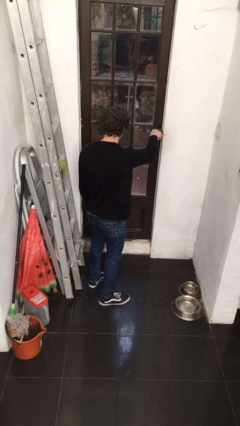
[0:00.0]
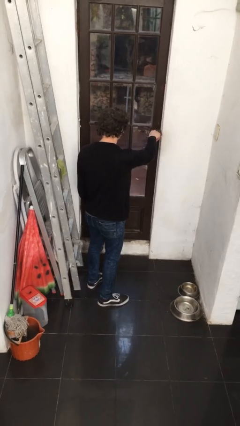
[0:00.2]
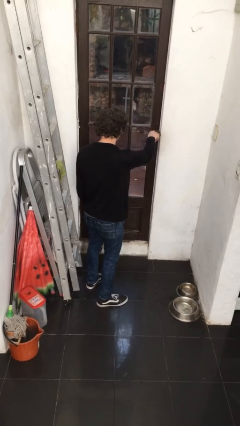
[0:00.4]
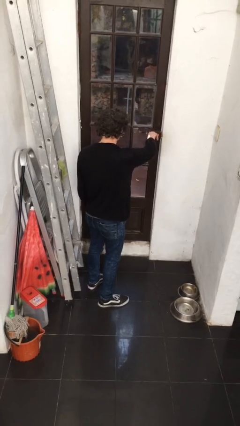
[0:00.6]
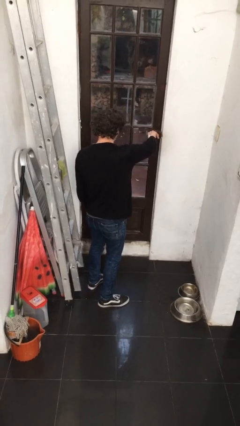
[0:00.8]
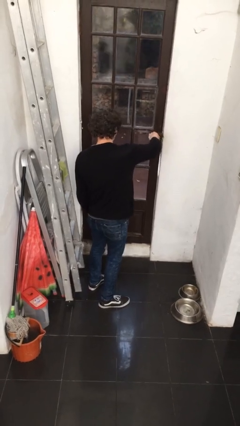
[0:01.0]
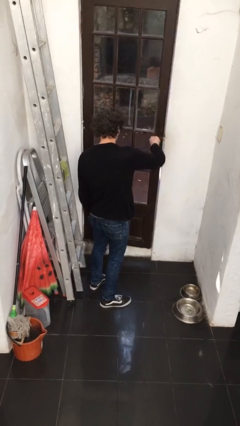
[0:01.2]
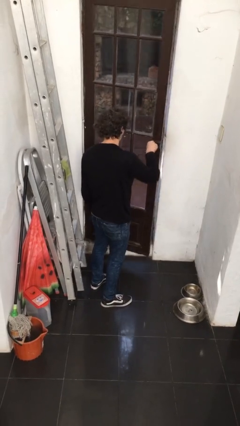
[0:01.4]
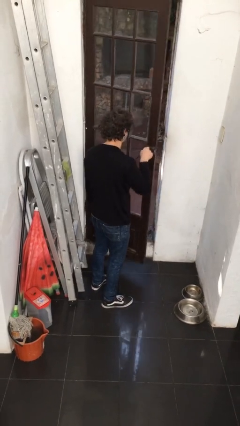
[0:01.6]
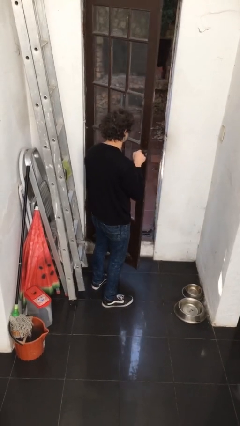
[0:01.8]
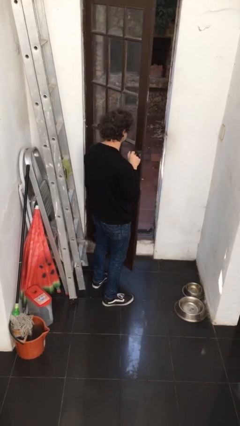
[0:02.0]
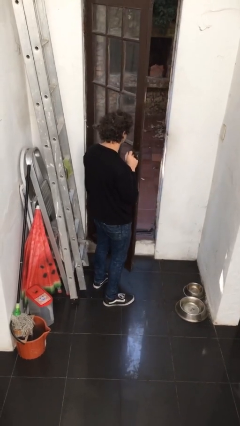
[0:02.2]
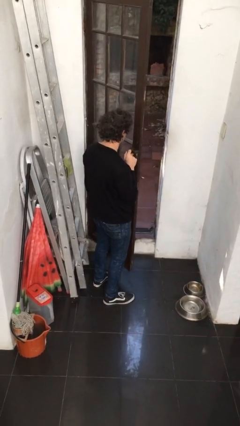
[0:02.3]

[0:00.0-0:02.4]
person opens facility door

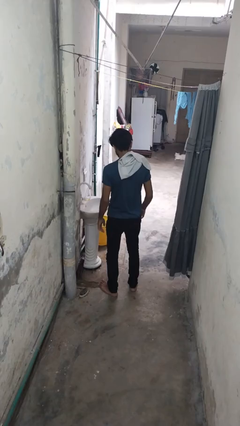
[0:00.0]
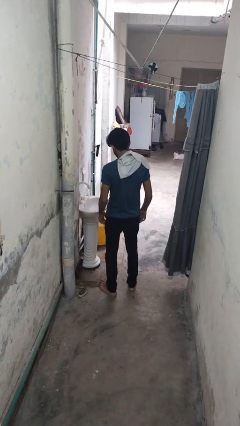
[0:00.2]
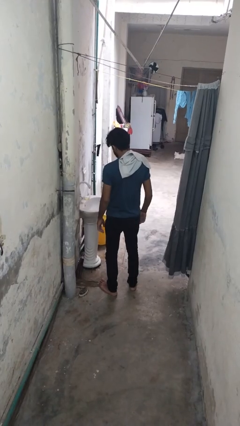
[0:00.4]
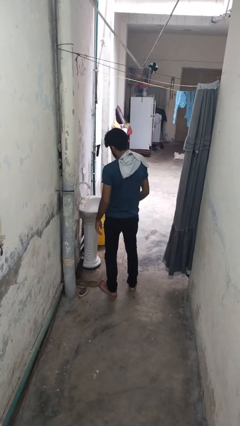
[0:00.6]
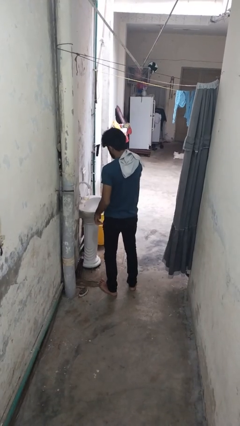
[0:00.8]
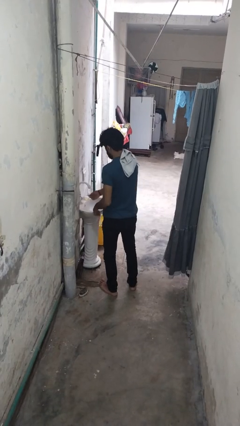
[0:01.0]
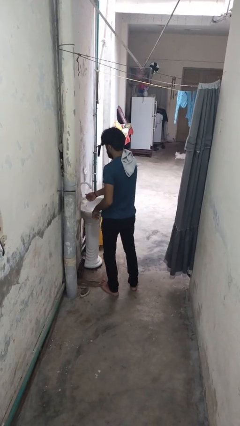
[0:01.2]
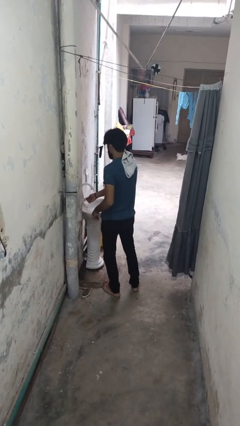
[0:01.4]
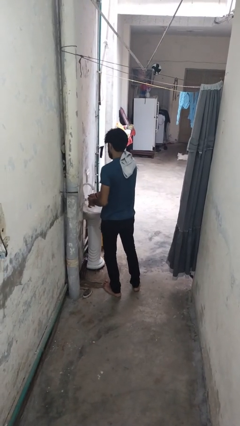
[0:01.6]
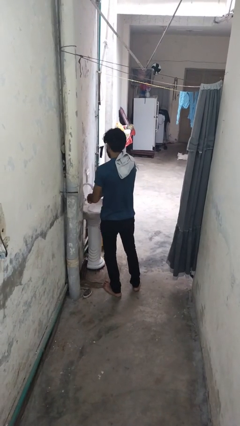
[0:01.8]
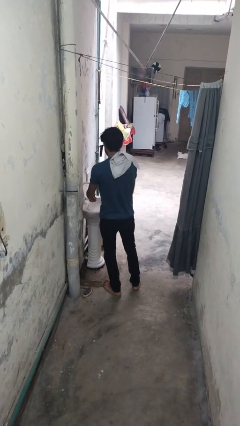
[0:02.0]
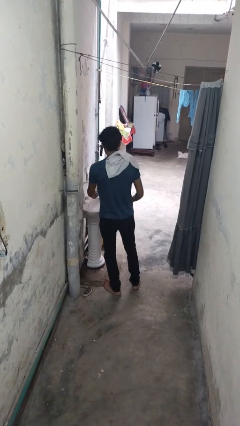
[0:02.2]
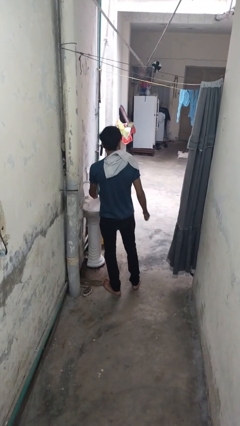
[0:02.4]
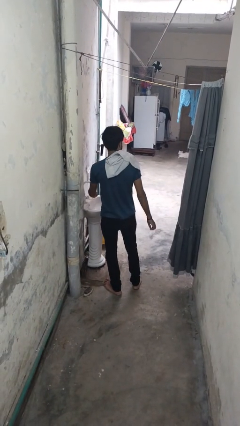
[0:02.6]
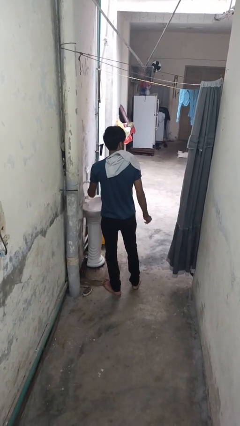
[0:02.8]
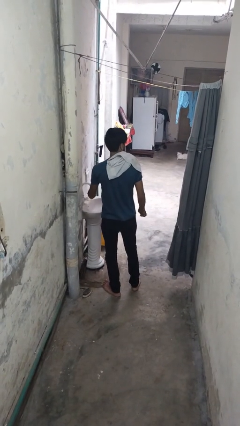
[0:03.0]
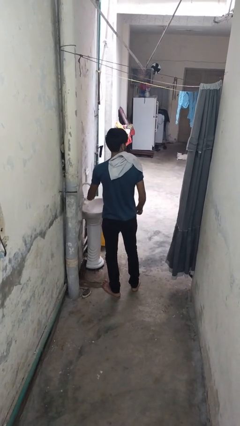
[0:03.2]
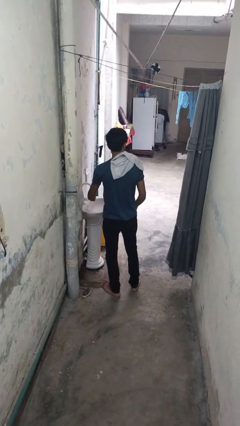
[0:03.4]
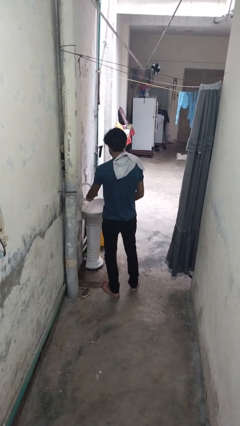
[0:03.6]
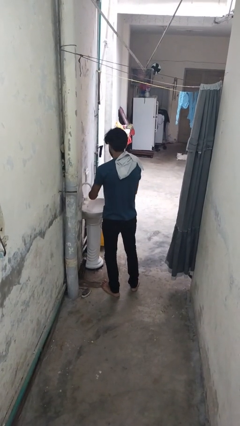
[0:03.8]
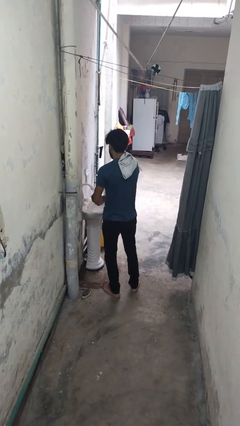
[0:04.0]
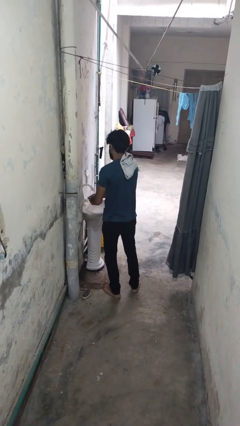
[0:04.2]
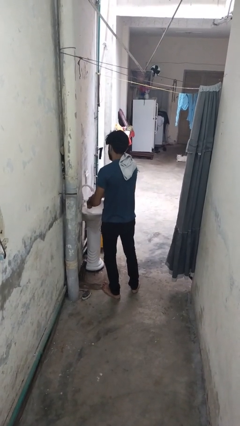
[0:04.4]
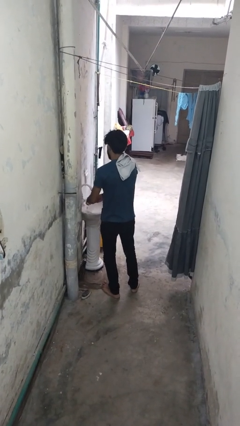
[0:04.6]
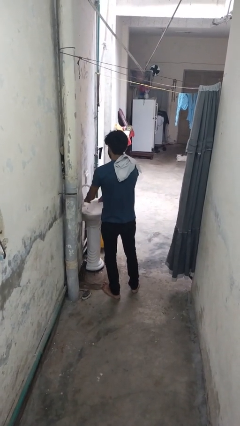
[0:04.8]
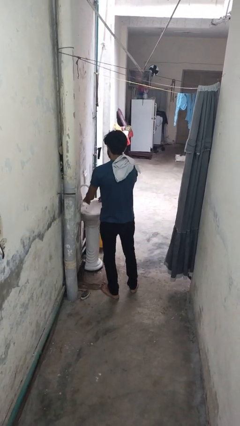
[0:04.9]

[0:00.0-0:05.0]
person washes hands

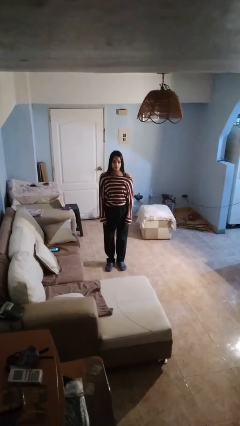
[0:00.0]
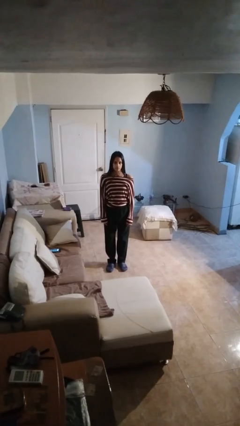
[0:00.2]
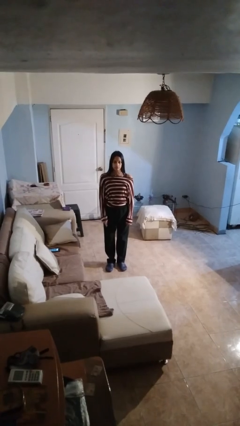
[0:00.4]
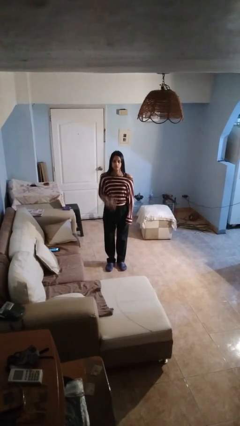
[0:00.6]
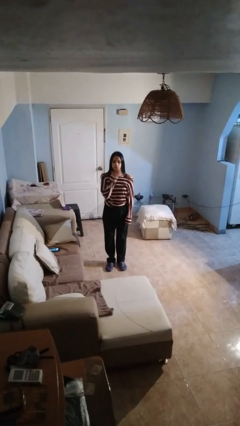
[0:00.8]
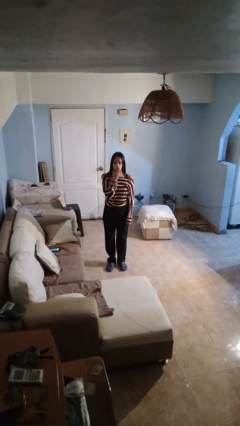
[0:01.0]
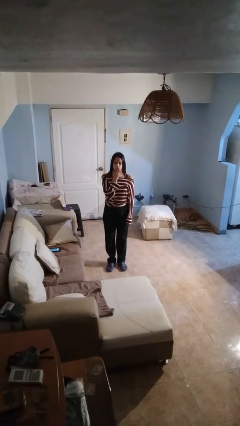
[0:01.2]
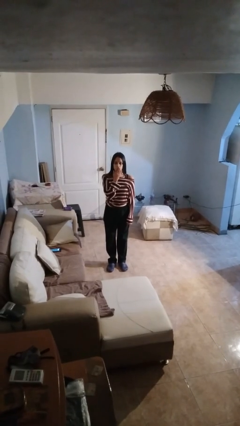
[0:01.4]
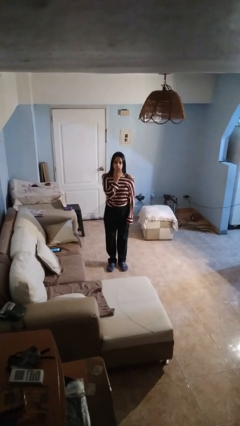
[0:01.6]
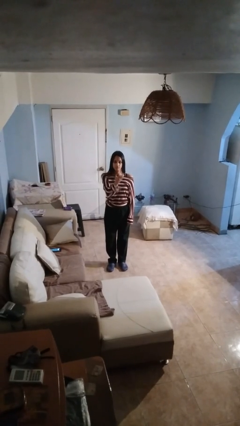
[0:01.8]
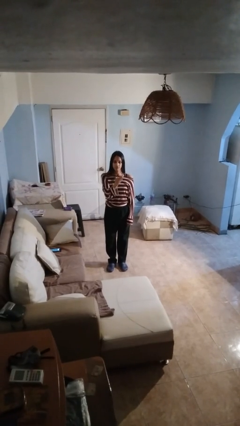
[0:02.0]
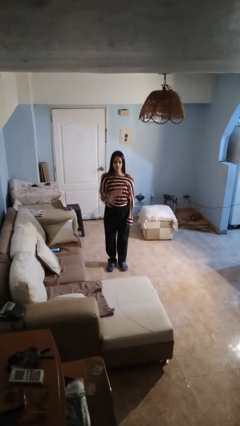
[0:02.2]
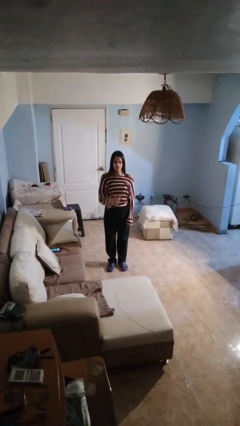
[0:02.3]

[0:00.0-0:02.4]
person gestures blow kiss

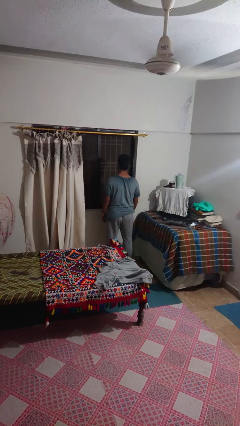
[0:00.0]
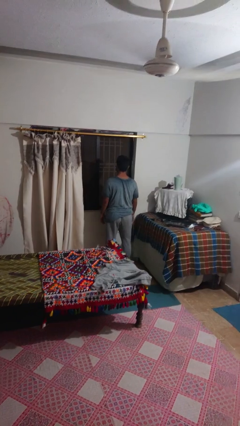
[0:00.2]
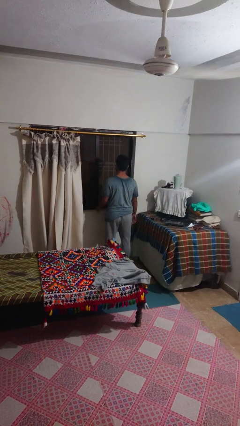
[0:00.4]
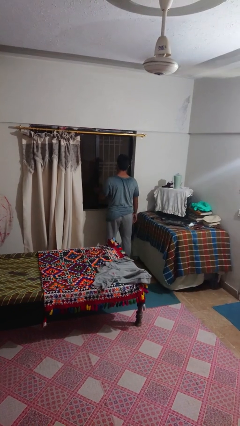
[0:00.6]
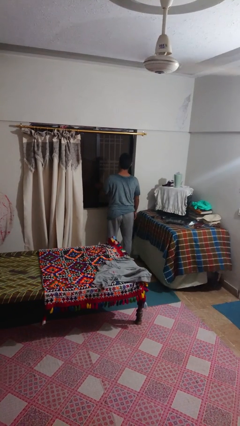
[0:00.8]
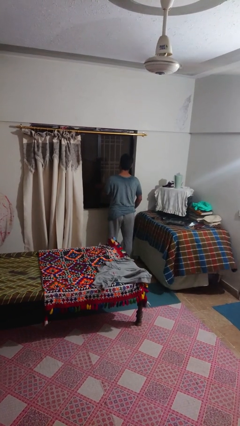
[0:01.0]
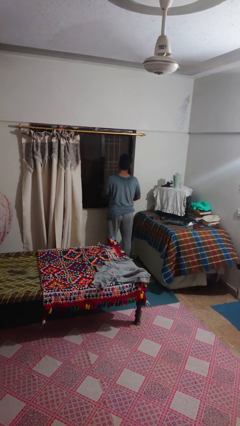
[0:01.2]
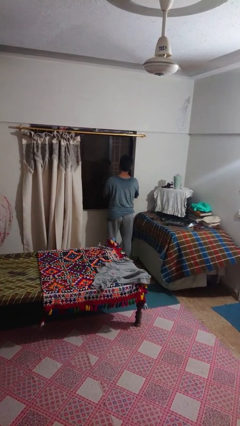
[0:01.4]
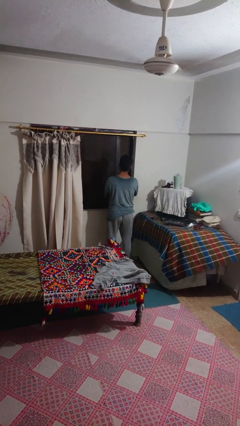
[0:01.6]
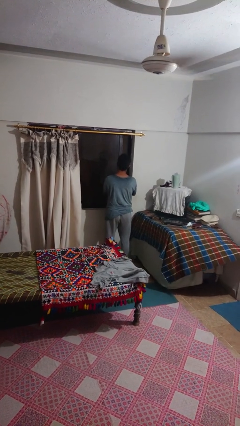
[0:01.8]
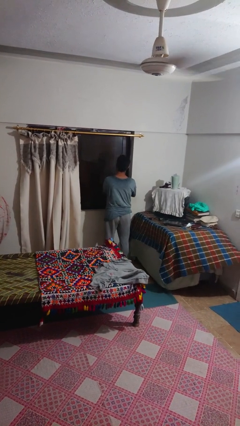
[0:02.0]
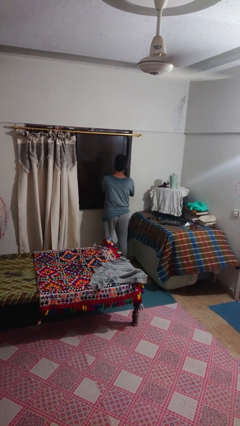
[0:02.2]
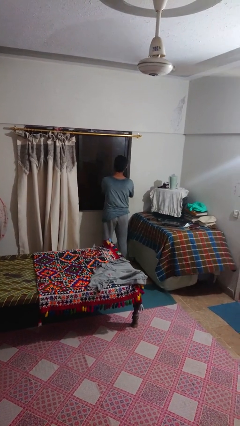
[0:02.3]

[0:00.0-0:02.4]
person closes home window

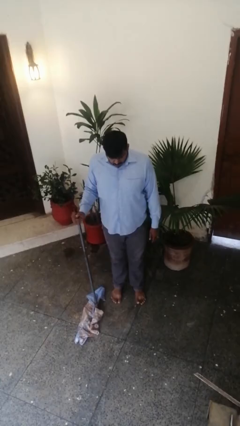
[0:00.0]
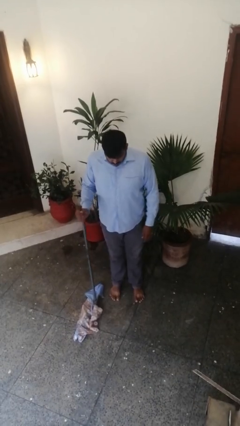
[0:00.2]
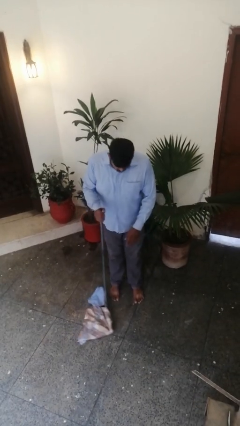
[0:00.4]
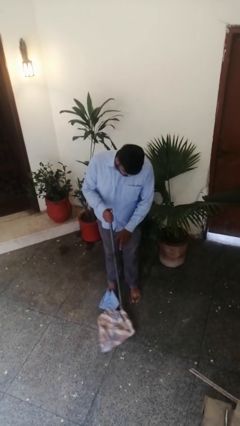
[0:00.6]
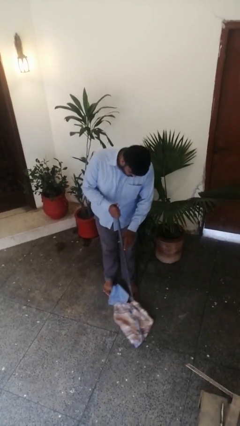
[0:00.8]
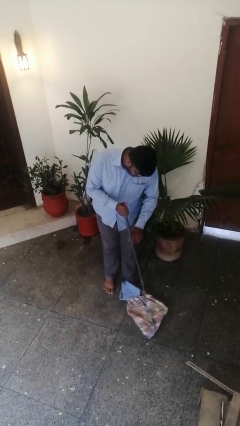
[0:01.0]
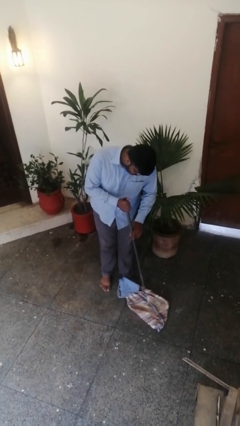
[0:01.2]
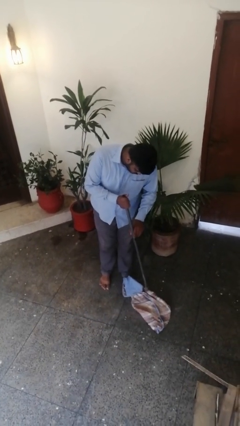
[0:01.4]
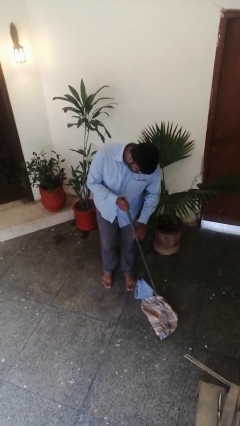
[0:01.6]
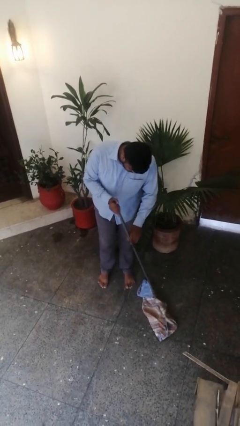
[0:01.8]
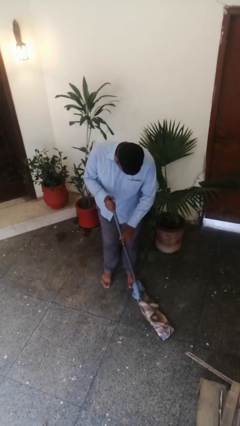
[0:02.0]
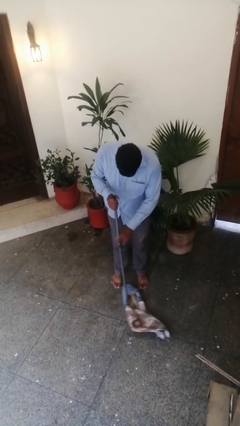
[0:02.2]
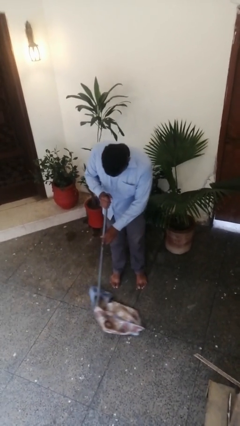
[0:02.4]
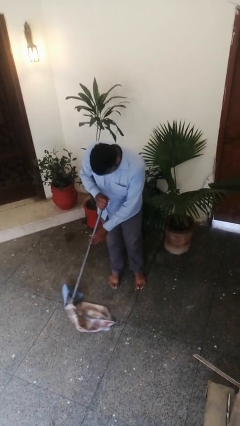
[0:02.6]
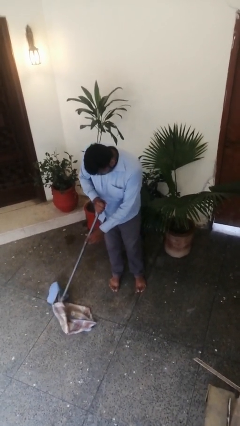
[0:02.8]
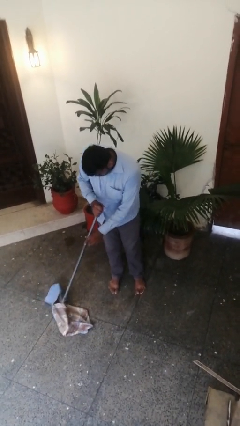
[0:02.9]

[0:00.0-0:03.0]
person sweeps floor

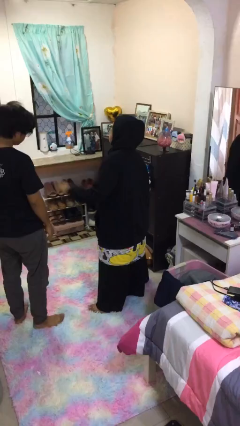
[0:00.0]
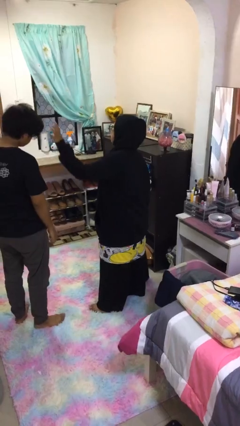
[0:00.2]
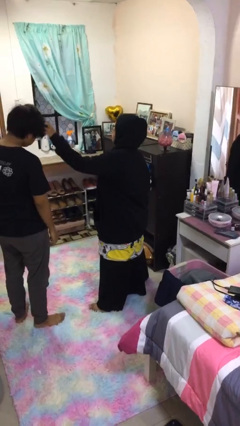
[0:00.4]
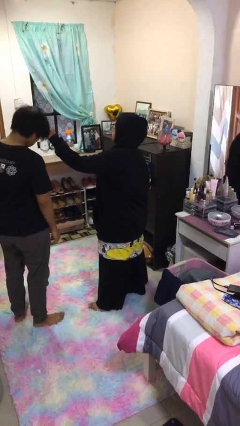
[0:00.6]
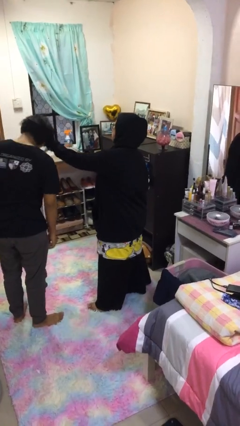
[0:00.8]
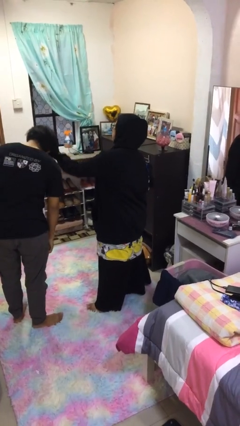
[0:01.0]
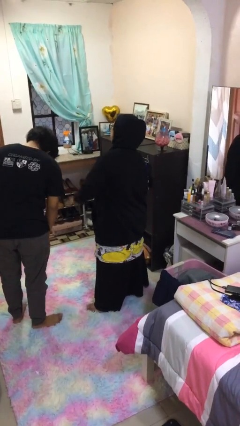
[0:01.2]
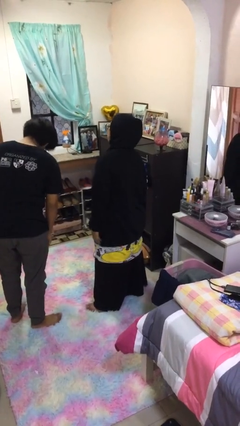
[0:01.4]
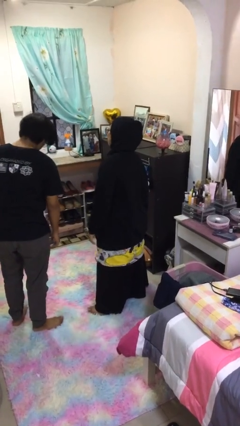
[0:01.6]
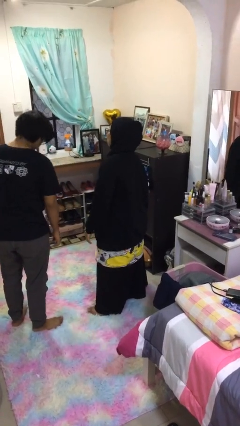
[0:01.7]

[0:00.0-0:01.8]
person grabs person by hair

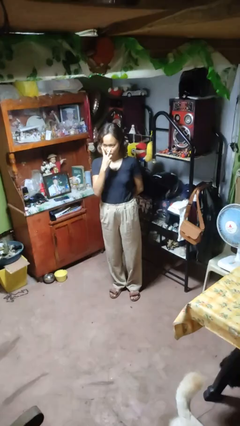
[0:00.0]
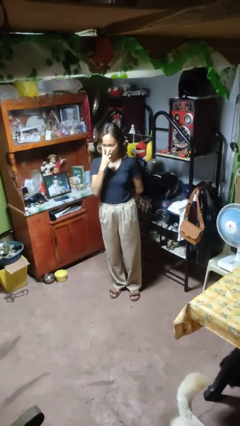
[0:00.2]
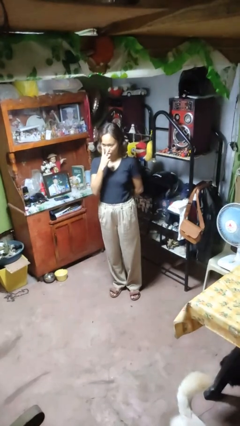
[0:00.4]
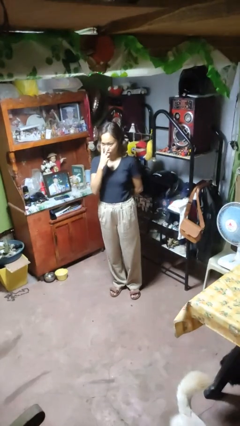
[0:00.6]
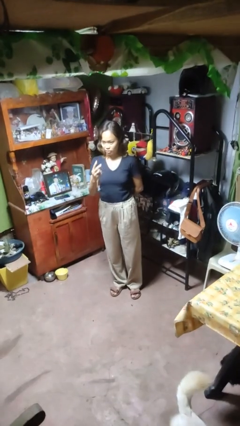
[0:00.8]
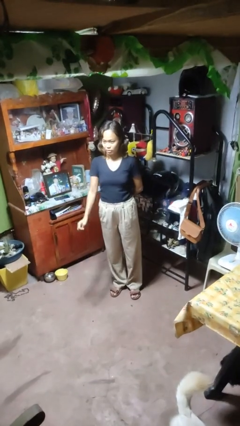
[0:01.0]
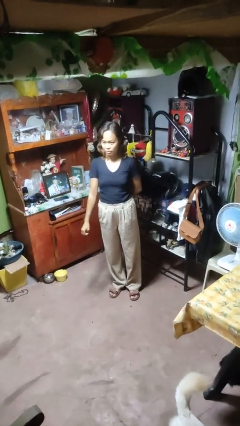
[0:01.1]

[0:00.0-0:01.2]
person gestures watch closely
